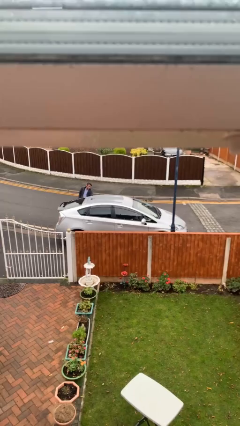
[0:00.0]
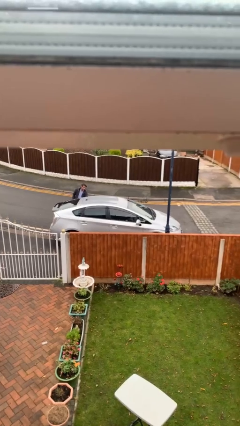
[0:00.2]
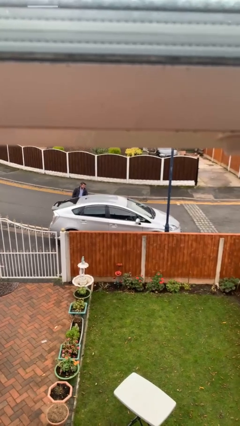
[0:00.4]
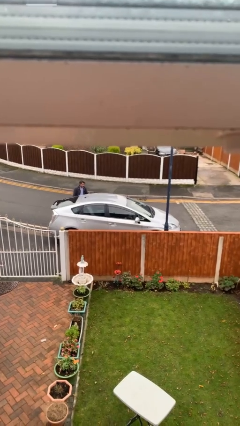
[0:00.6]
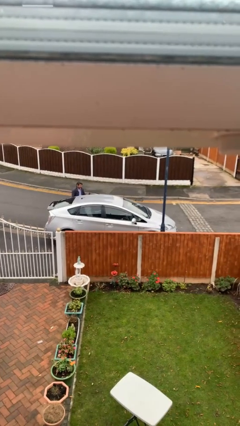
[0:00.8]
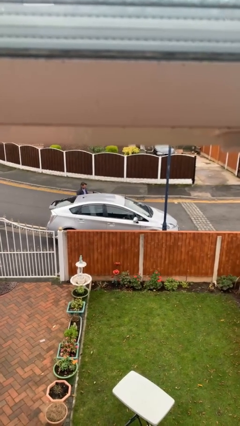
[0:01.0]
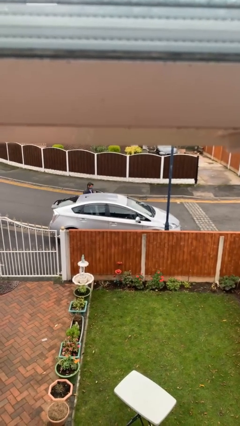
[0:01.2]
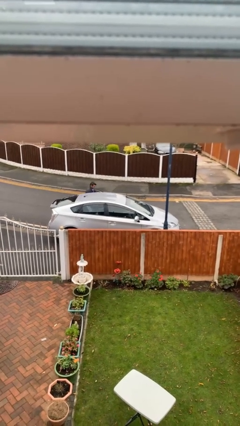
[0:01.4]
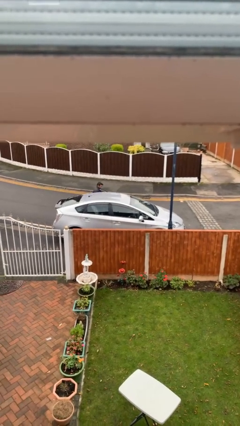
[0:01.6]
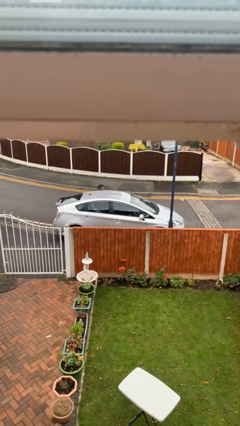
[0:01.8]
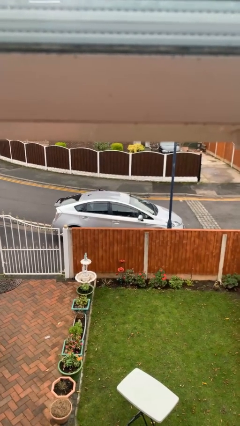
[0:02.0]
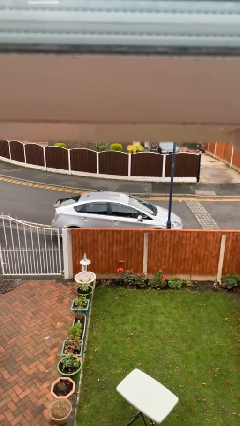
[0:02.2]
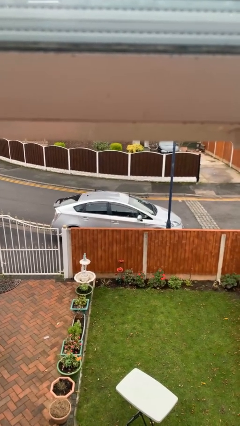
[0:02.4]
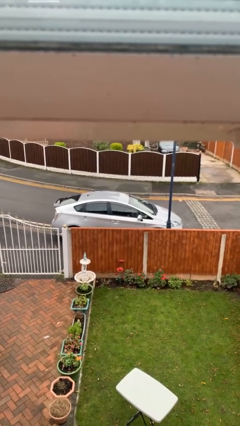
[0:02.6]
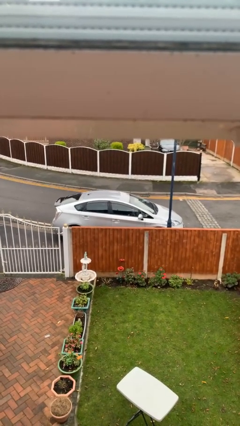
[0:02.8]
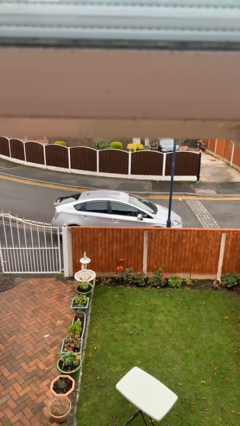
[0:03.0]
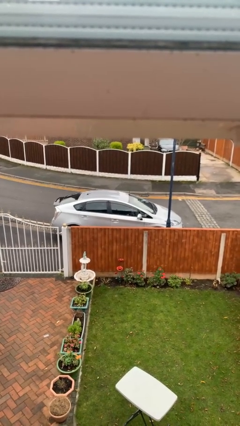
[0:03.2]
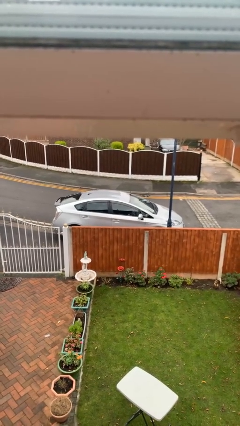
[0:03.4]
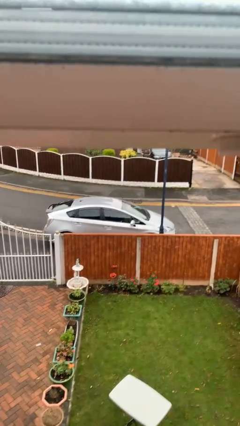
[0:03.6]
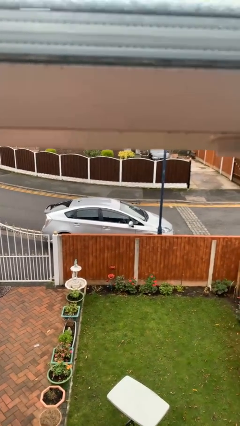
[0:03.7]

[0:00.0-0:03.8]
car picks up person

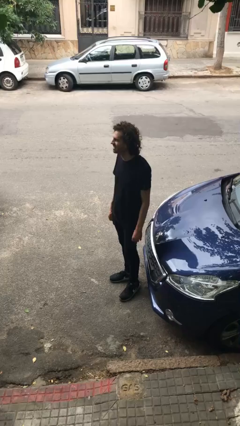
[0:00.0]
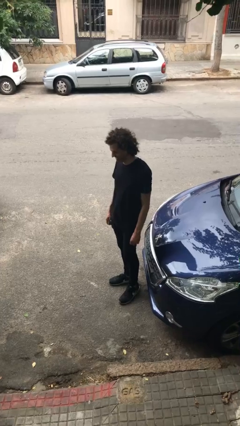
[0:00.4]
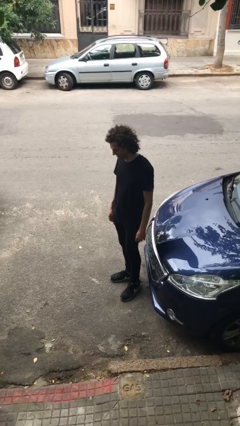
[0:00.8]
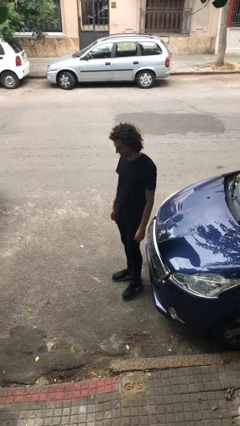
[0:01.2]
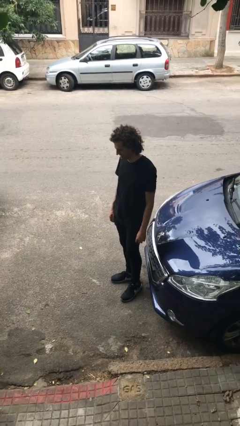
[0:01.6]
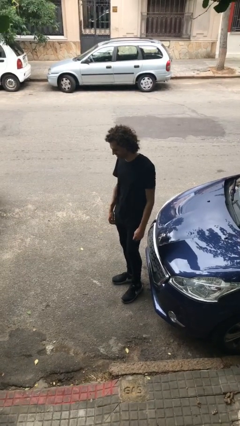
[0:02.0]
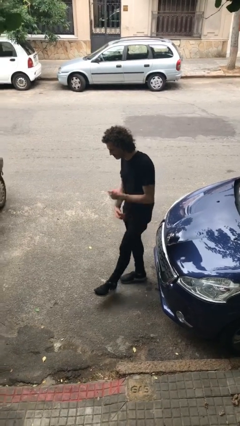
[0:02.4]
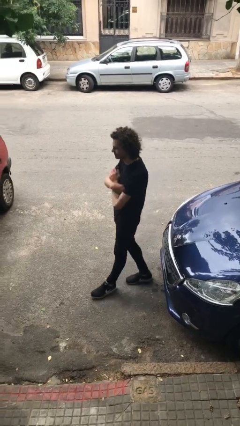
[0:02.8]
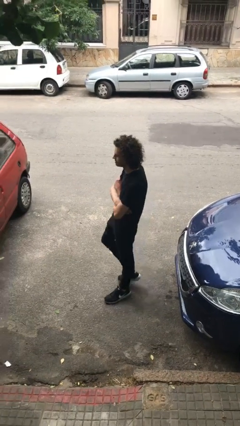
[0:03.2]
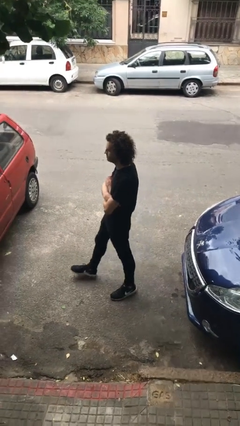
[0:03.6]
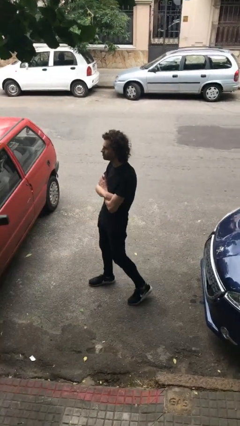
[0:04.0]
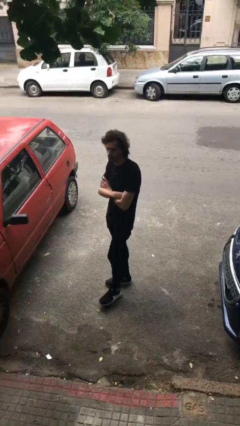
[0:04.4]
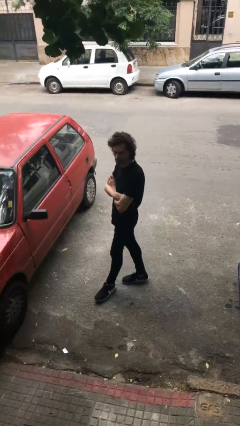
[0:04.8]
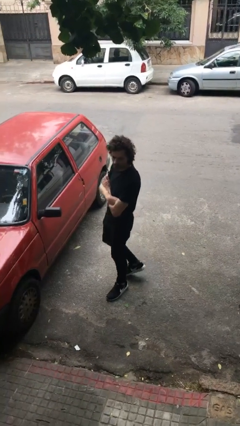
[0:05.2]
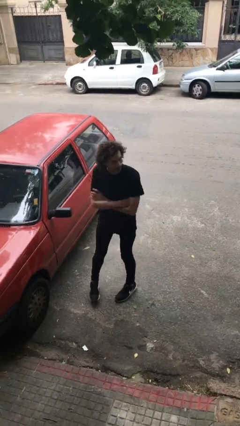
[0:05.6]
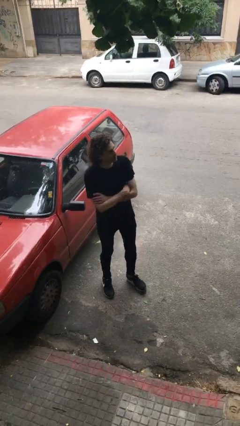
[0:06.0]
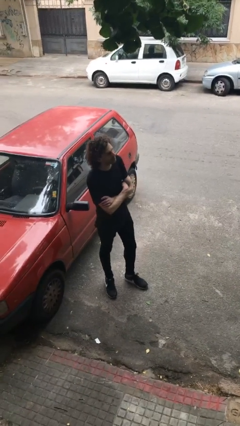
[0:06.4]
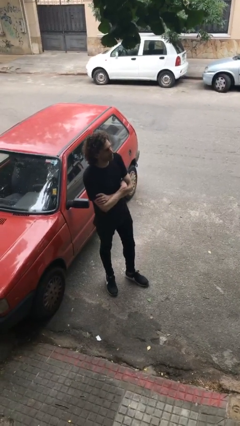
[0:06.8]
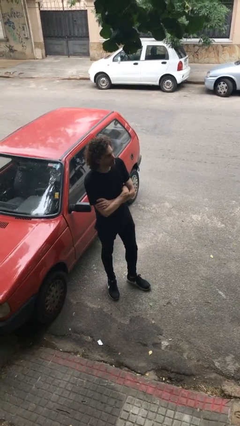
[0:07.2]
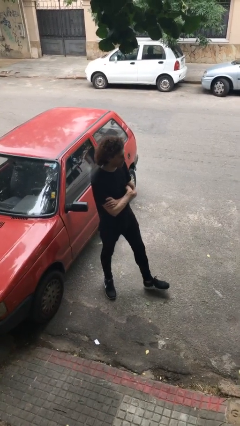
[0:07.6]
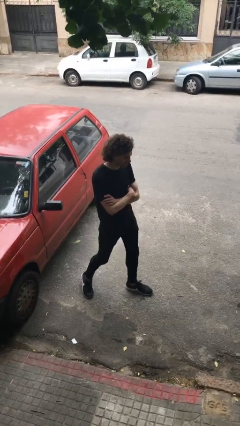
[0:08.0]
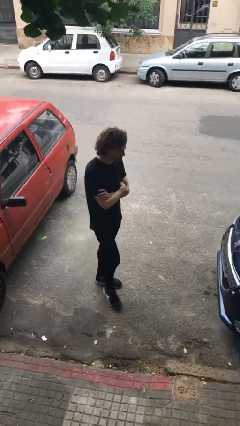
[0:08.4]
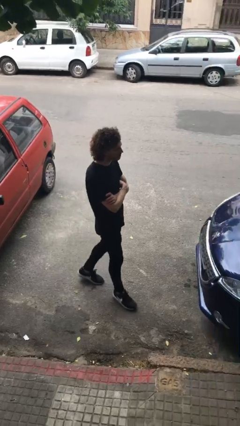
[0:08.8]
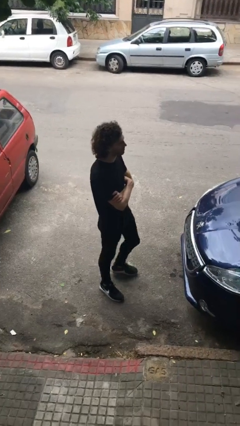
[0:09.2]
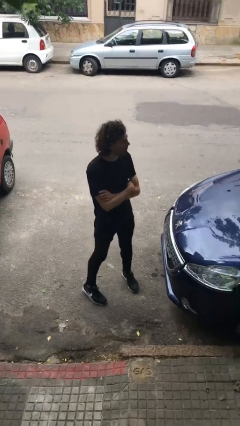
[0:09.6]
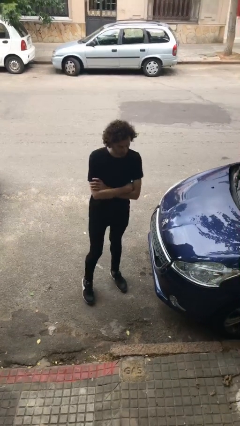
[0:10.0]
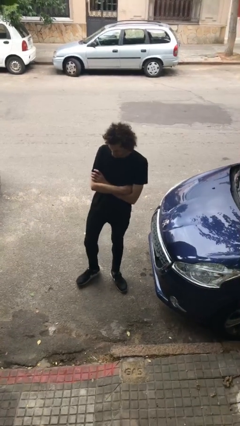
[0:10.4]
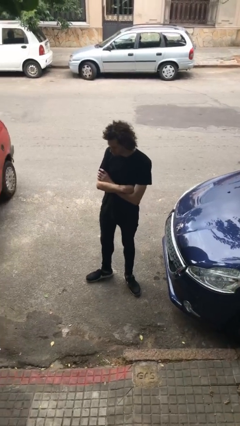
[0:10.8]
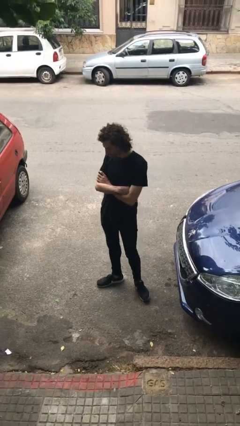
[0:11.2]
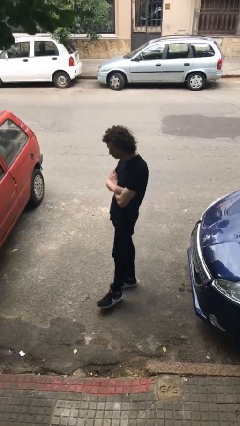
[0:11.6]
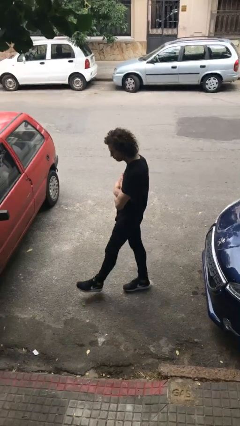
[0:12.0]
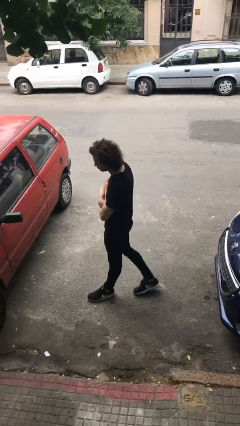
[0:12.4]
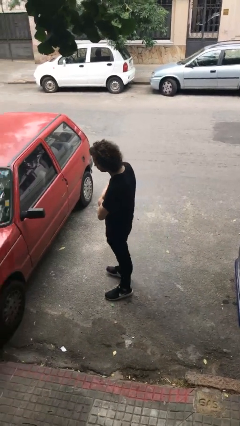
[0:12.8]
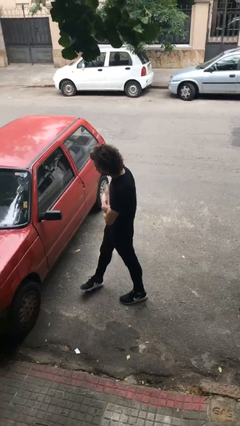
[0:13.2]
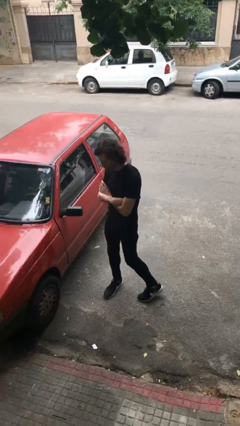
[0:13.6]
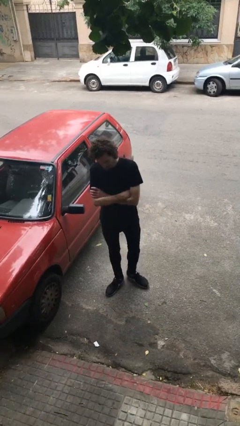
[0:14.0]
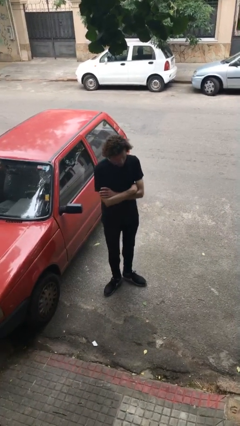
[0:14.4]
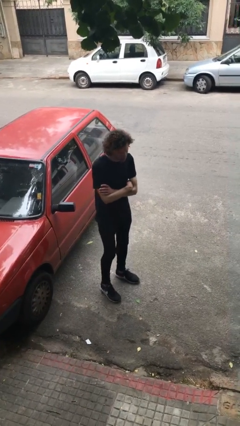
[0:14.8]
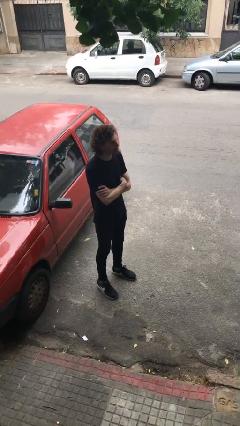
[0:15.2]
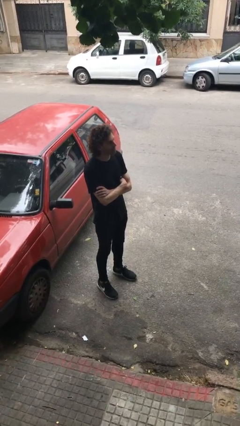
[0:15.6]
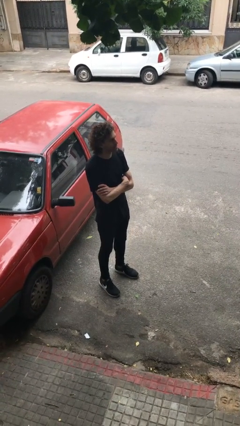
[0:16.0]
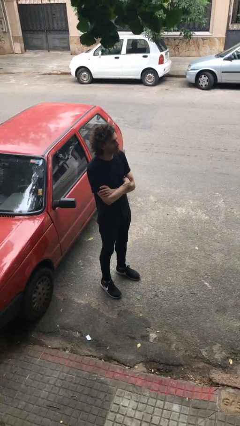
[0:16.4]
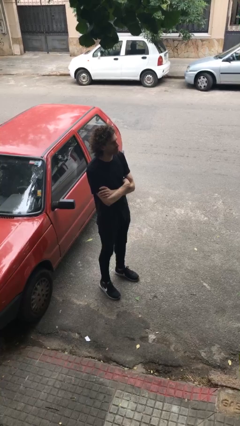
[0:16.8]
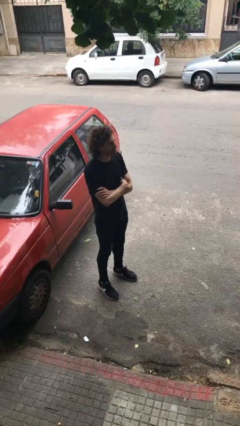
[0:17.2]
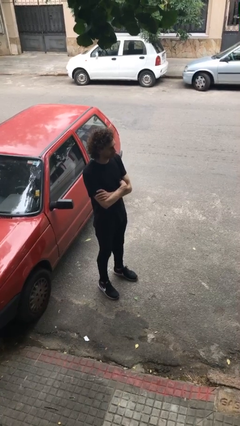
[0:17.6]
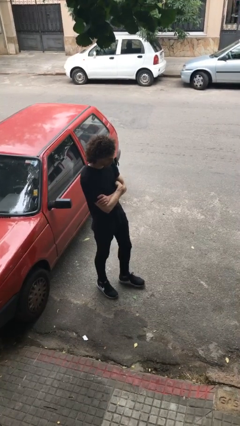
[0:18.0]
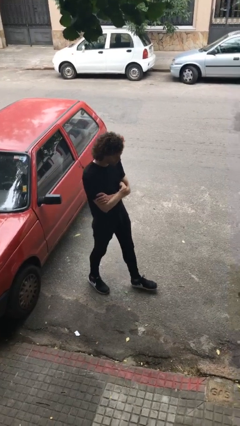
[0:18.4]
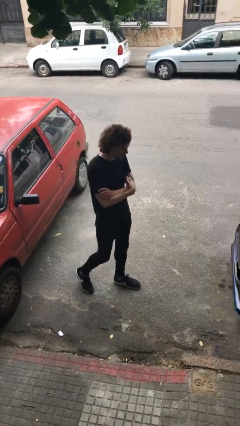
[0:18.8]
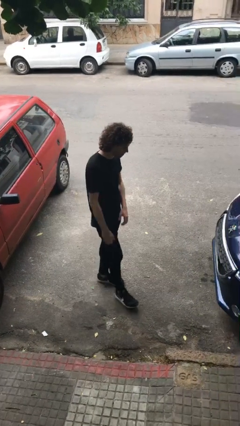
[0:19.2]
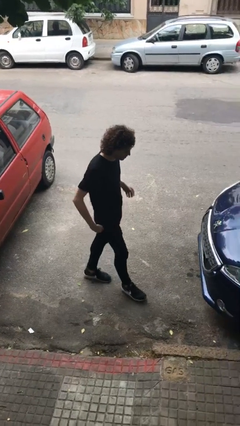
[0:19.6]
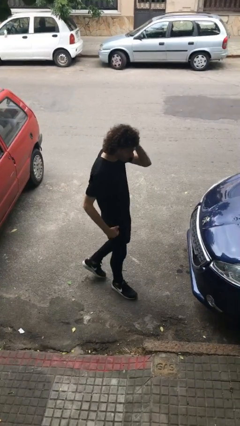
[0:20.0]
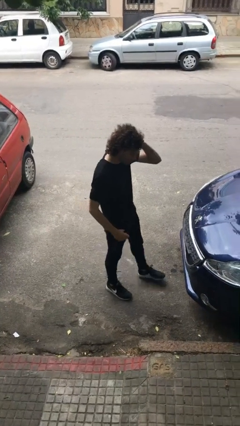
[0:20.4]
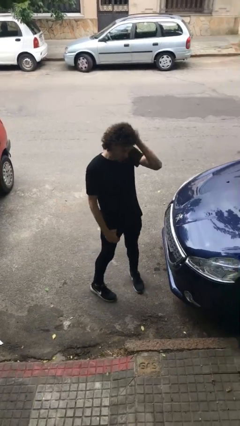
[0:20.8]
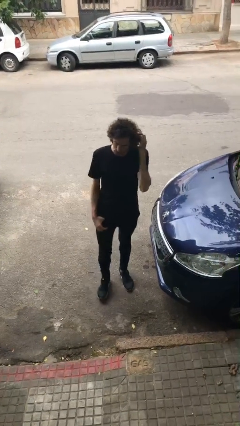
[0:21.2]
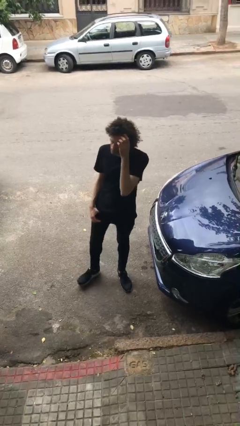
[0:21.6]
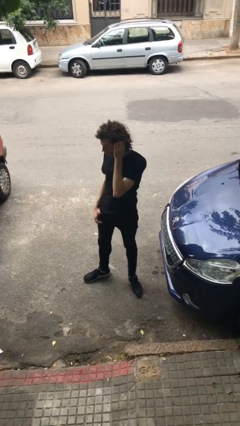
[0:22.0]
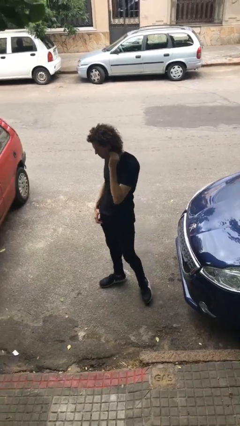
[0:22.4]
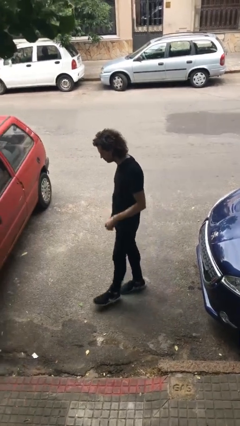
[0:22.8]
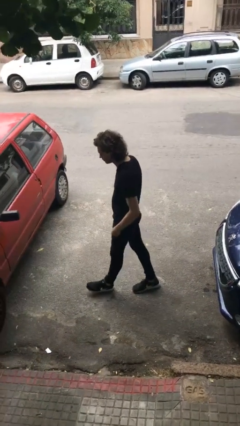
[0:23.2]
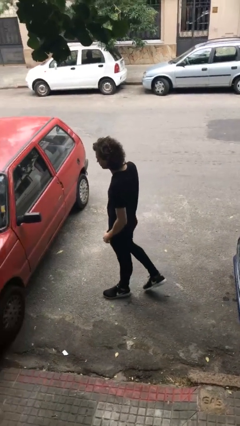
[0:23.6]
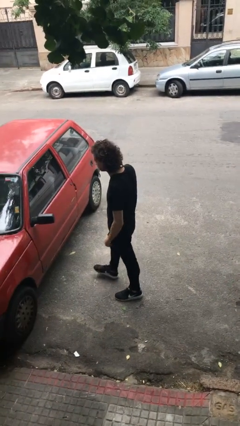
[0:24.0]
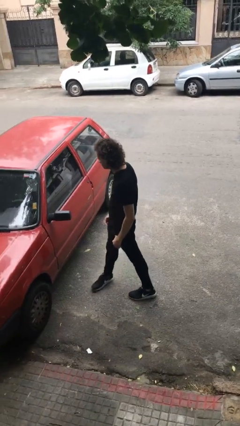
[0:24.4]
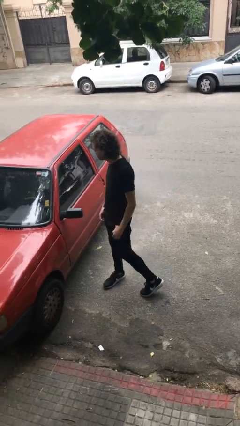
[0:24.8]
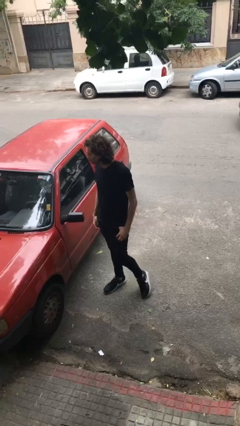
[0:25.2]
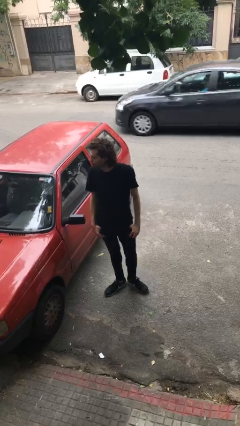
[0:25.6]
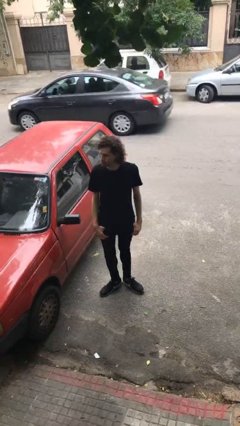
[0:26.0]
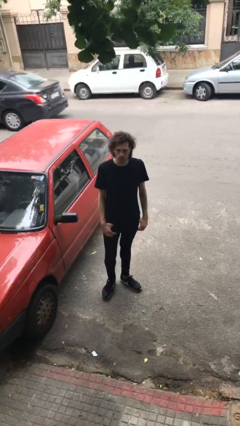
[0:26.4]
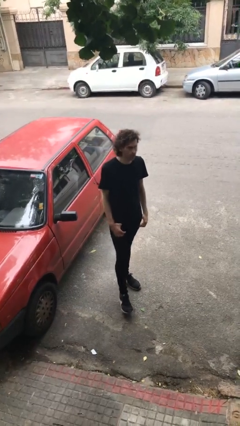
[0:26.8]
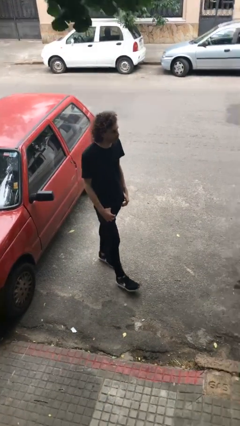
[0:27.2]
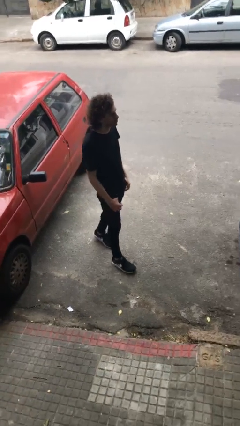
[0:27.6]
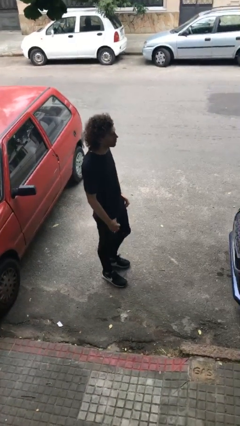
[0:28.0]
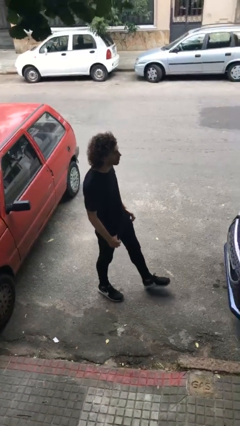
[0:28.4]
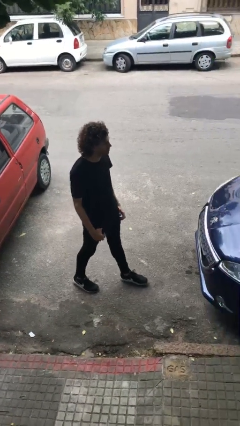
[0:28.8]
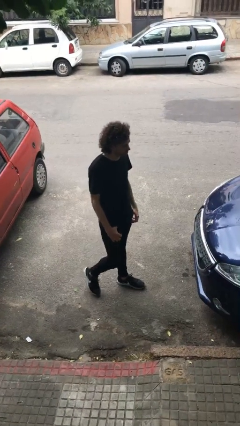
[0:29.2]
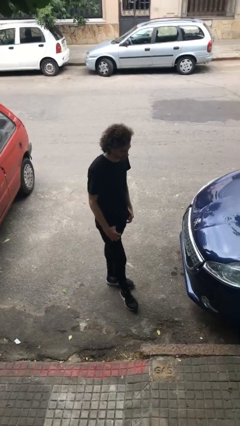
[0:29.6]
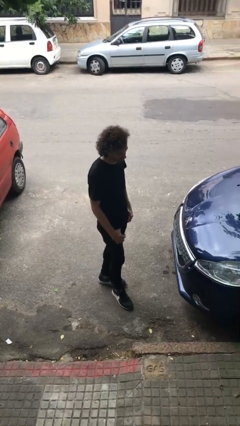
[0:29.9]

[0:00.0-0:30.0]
person walks
